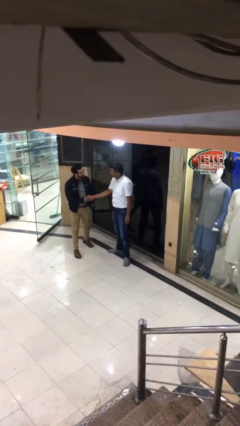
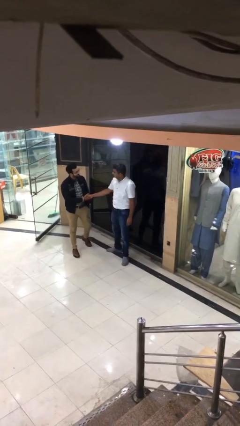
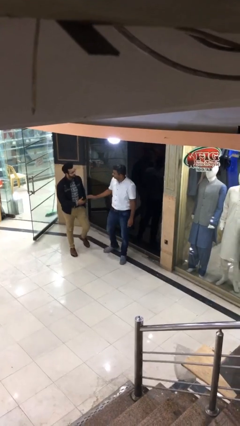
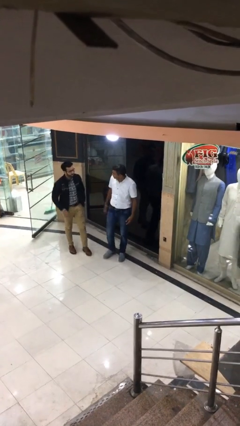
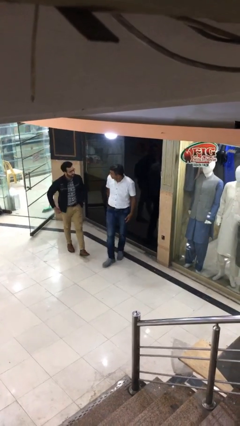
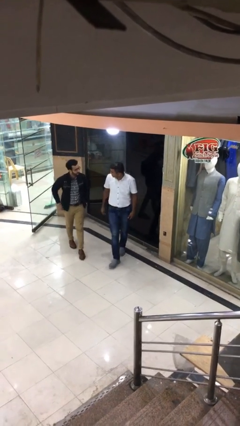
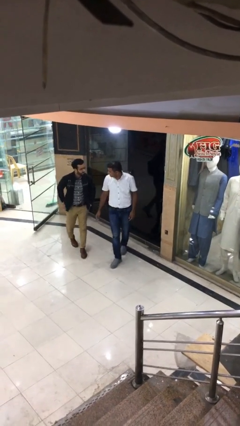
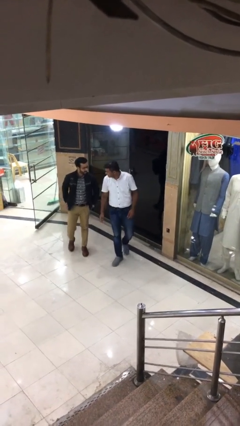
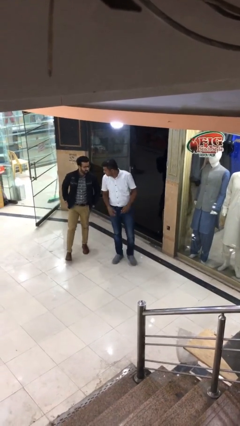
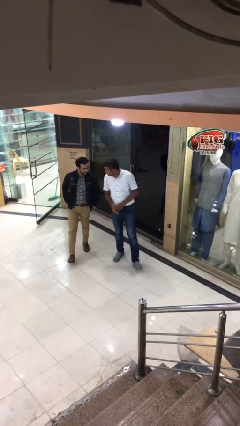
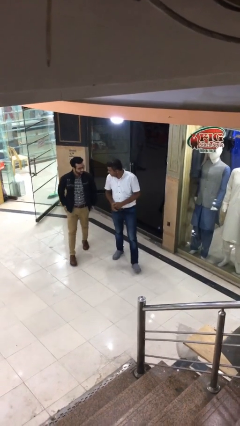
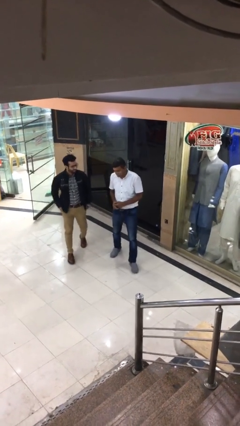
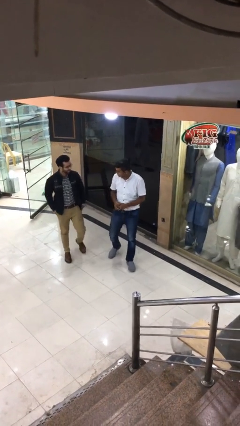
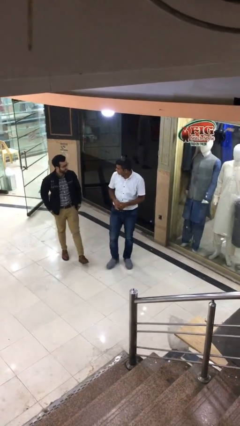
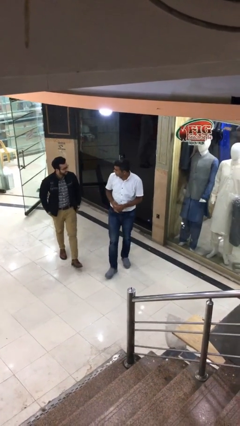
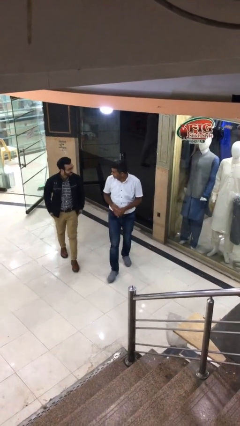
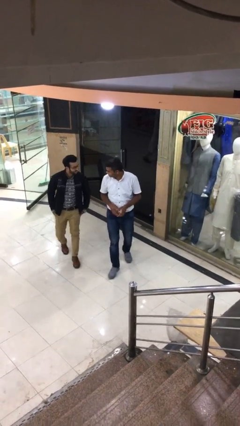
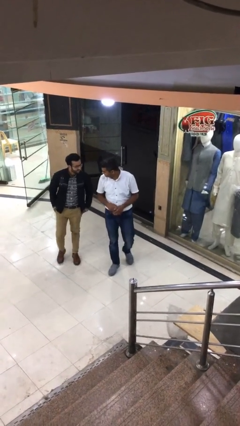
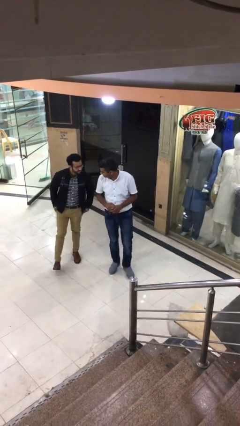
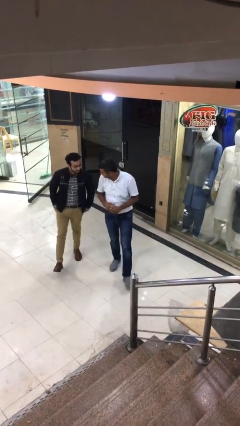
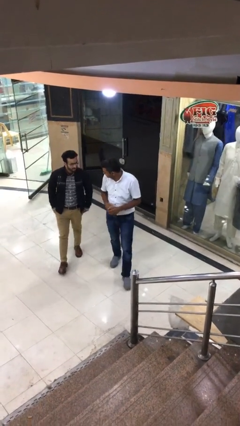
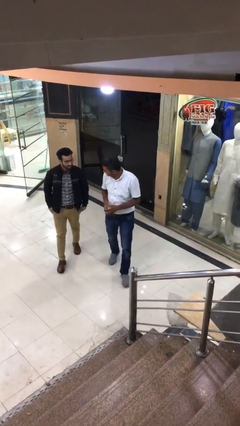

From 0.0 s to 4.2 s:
person talks to person

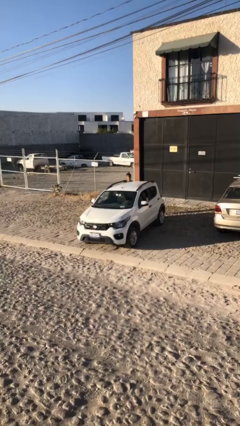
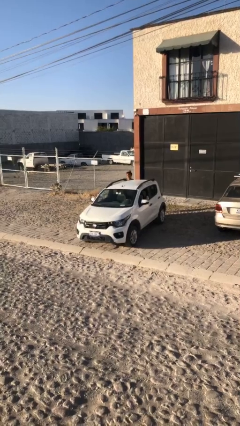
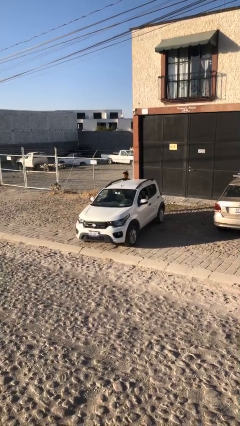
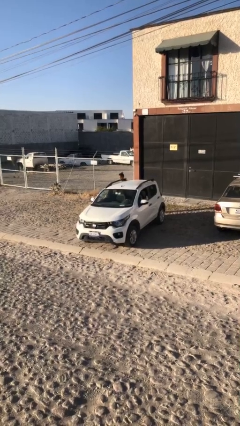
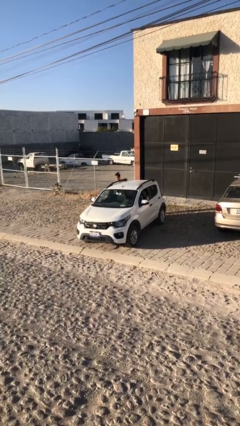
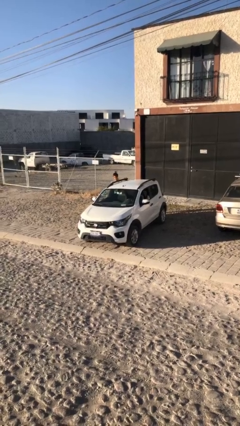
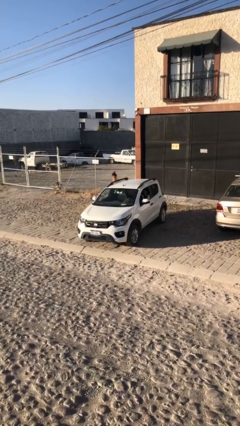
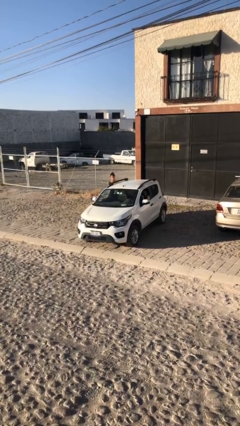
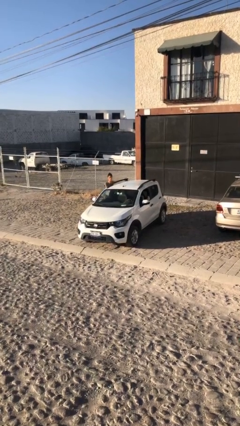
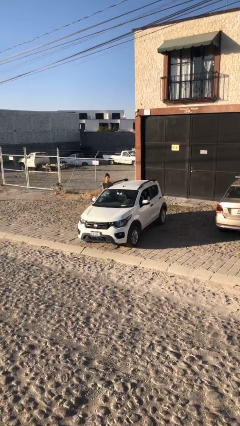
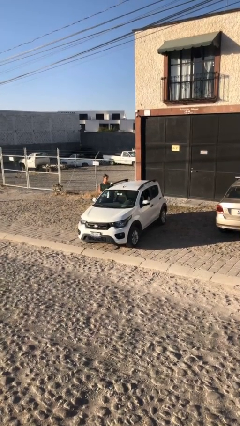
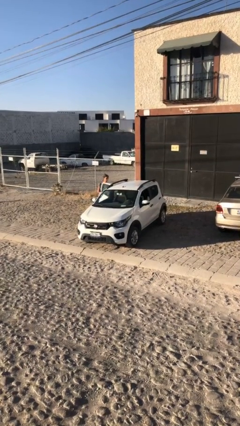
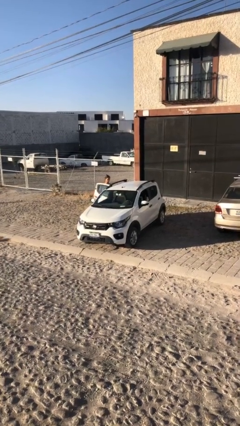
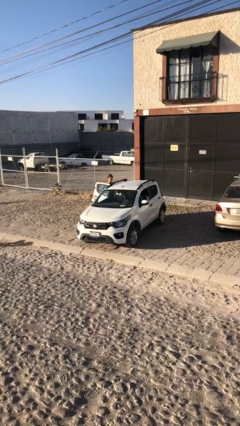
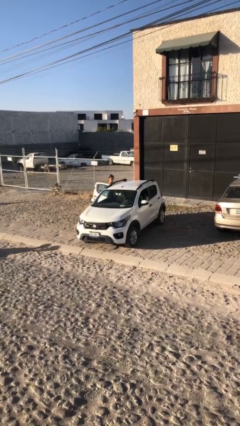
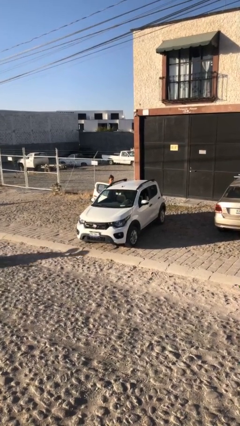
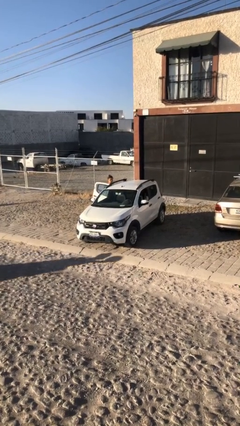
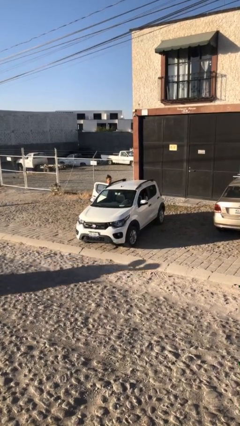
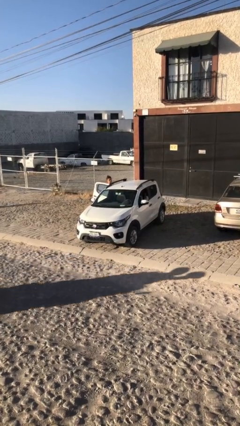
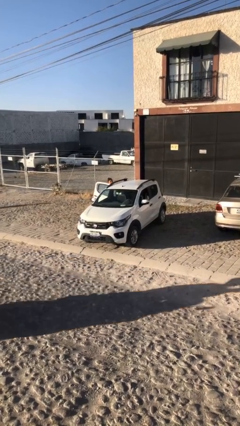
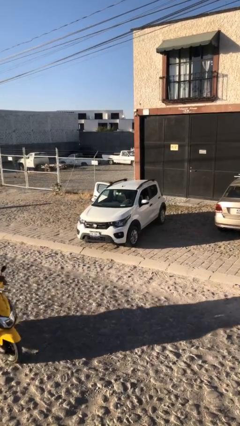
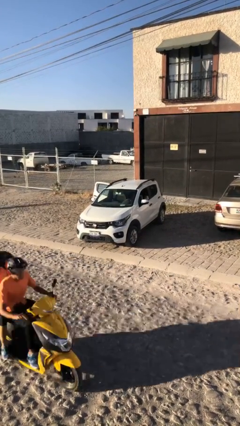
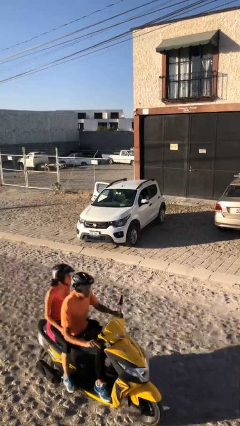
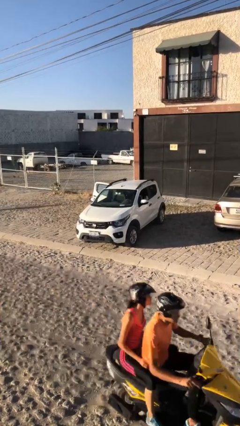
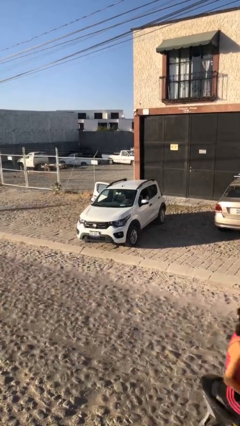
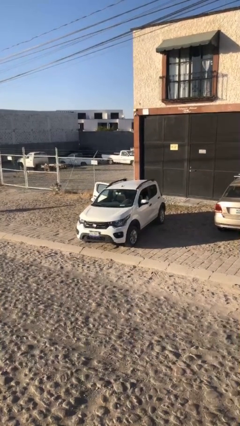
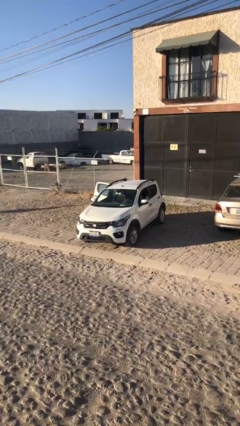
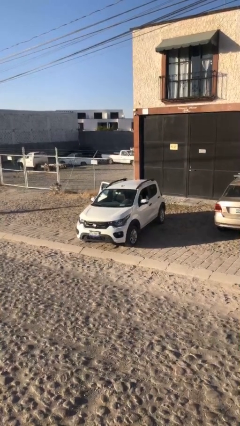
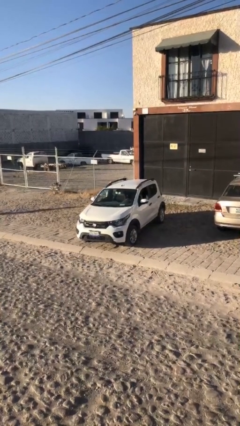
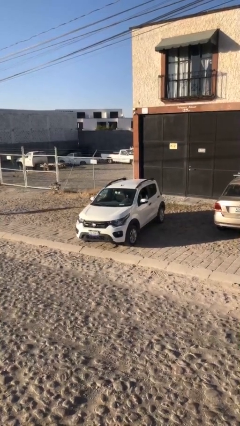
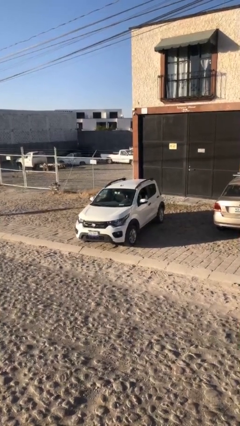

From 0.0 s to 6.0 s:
car picks up person

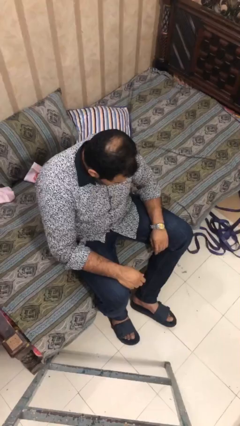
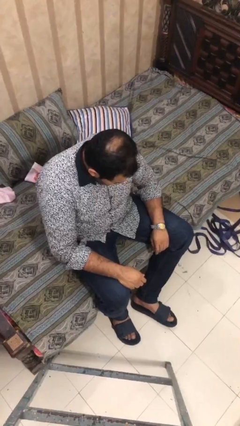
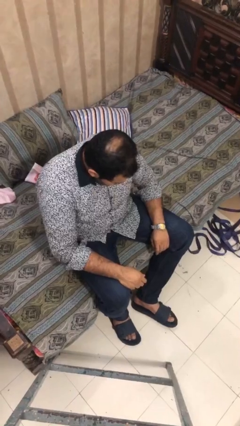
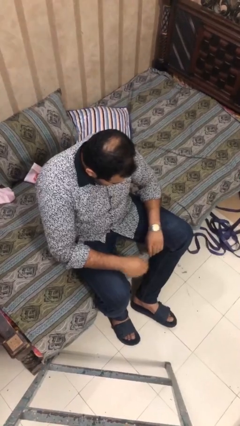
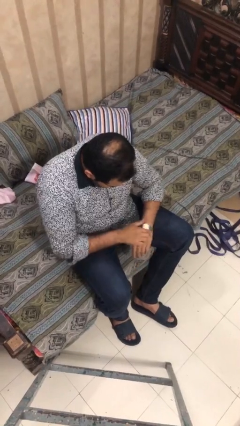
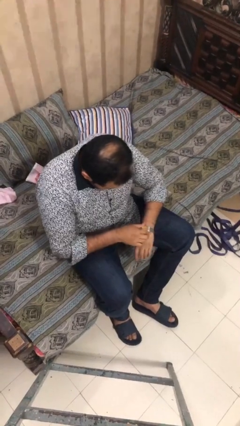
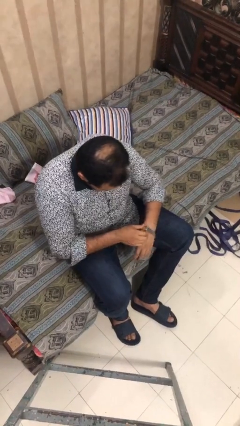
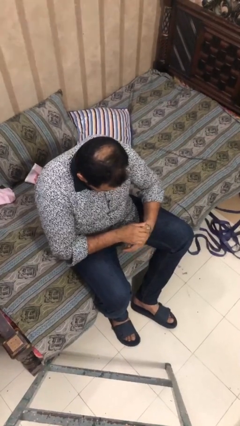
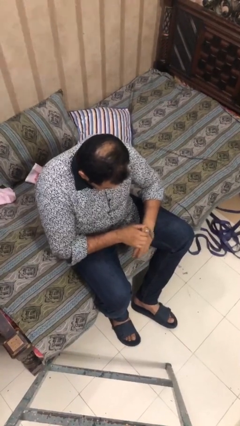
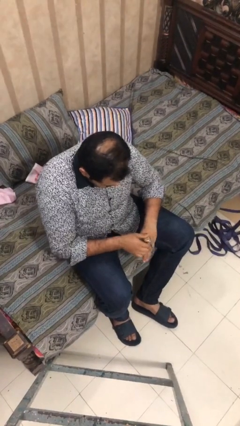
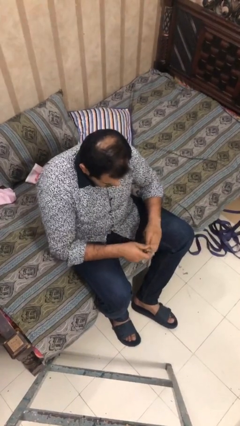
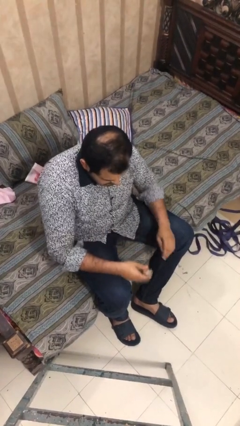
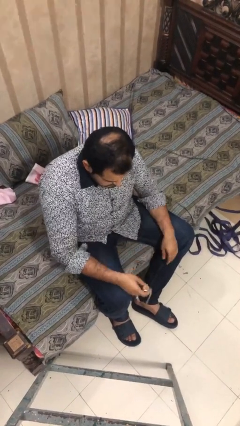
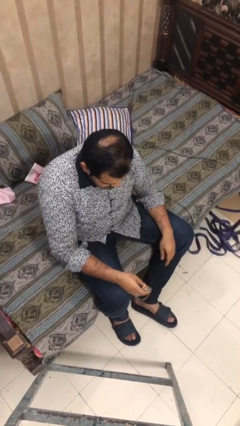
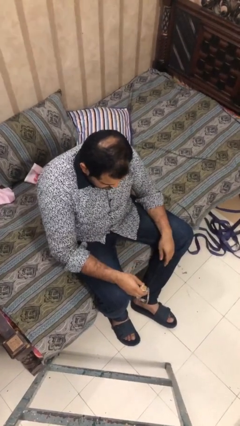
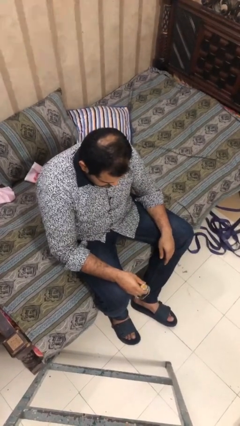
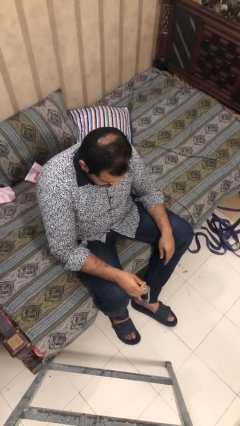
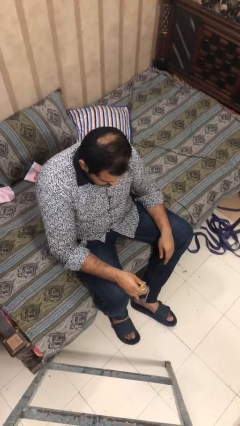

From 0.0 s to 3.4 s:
person takes off wristwatch

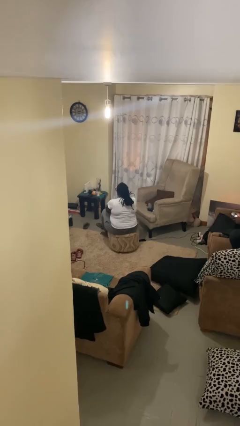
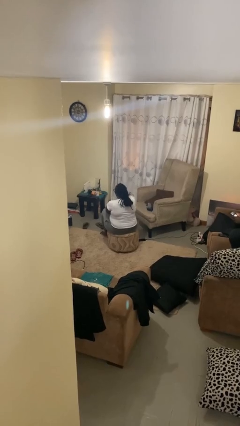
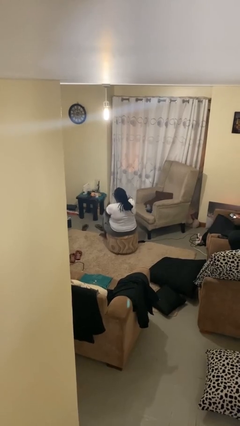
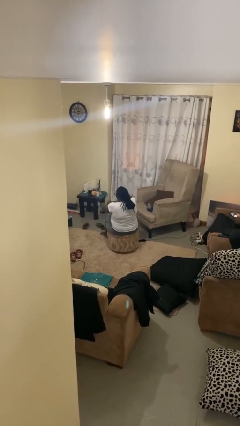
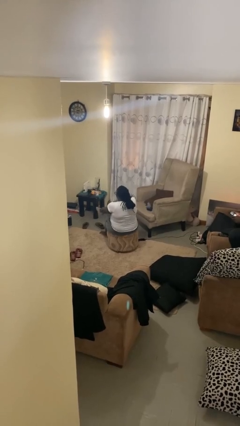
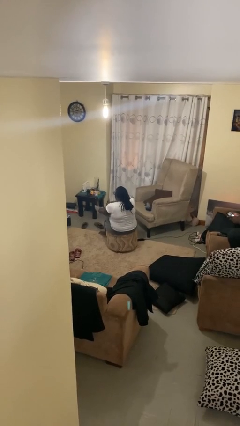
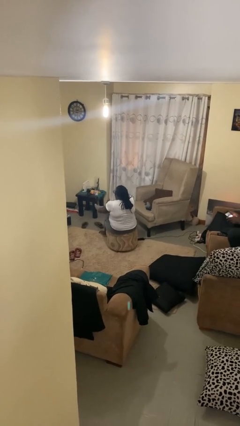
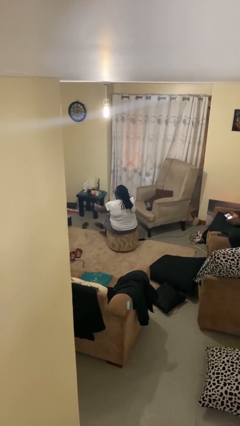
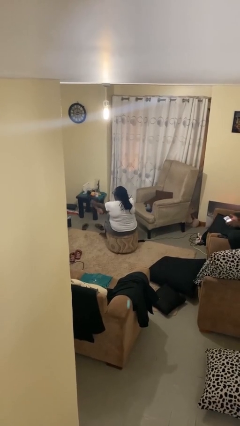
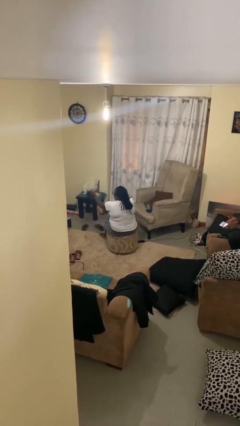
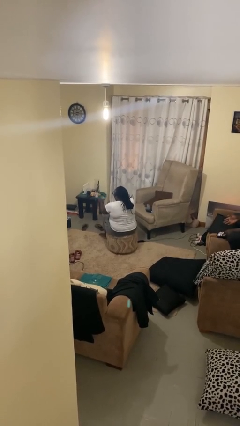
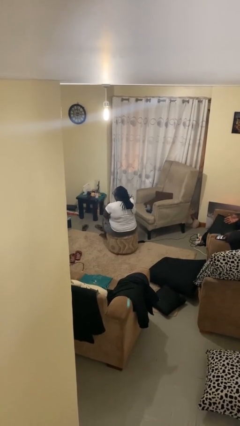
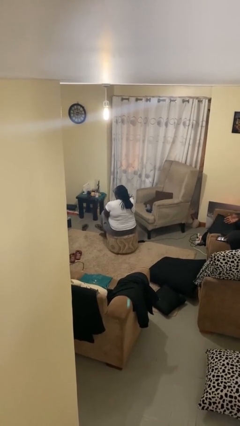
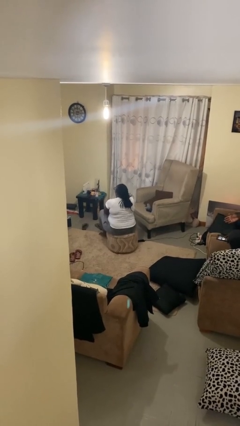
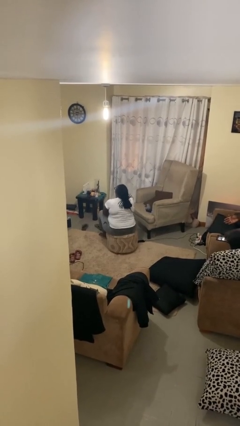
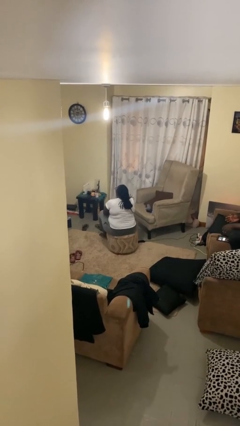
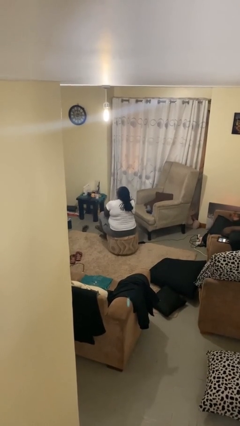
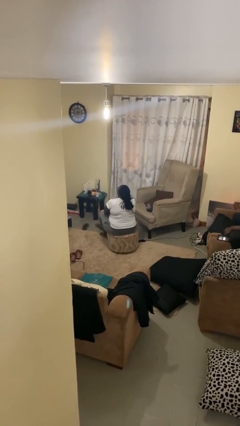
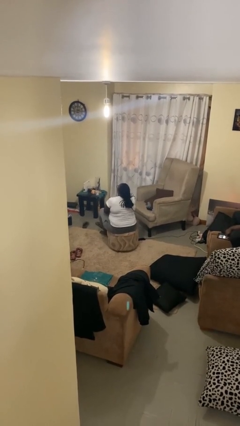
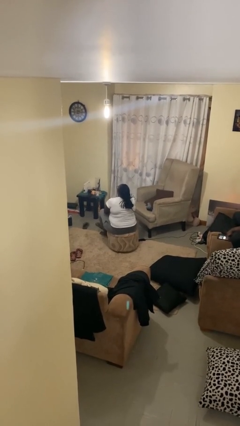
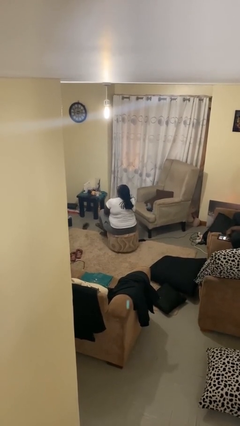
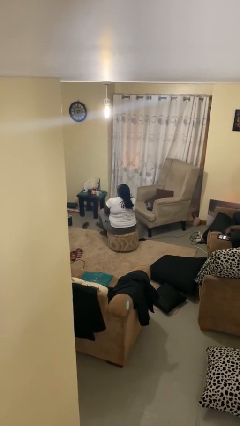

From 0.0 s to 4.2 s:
person takes off socks
